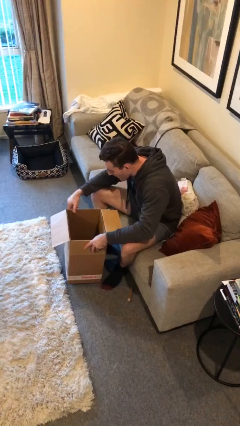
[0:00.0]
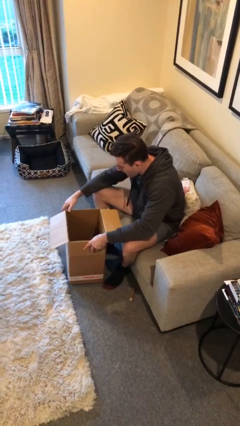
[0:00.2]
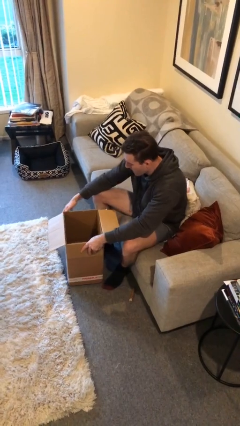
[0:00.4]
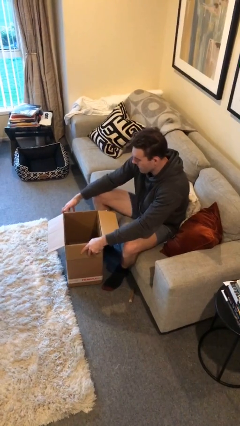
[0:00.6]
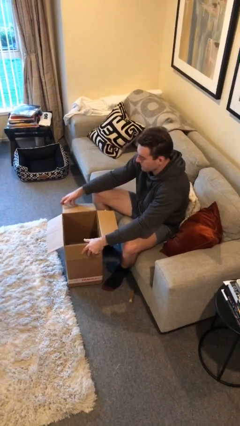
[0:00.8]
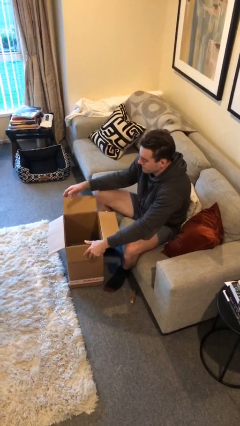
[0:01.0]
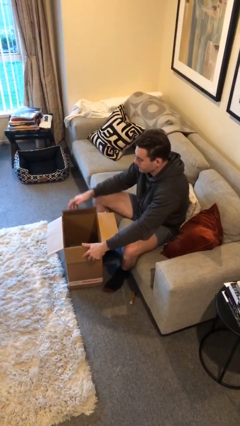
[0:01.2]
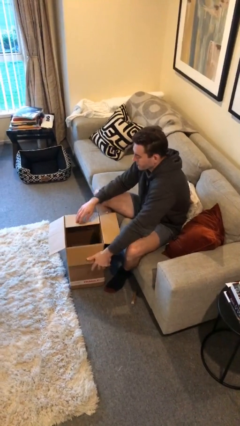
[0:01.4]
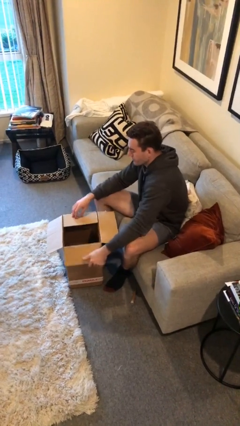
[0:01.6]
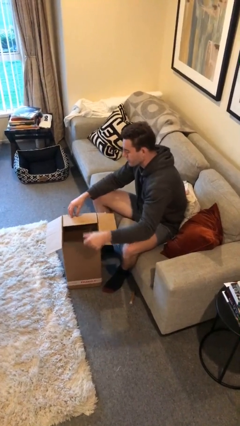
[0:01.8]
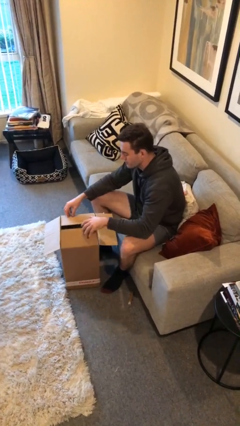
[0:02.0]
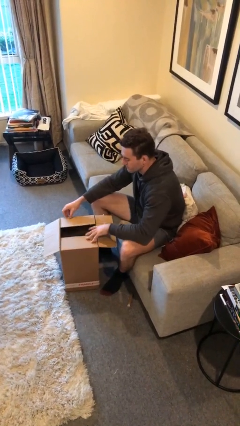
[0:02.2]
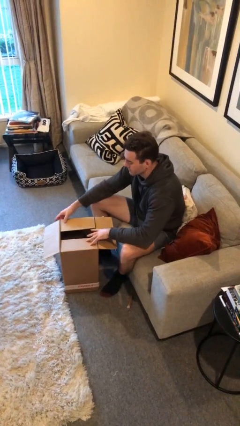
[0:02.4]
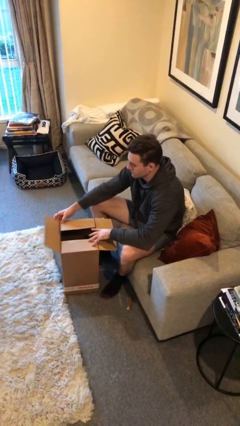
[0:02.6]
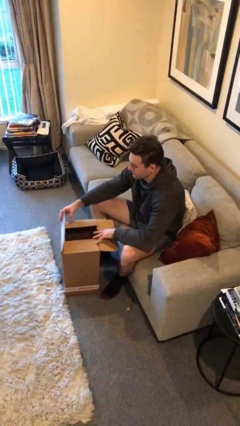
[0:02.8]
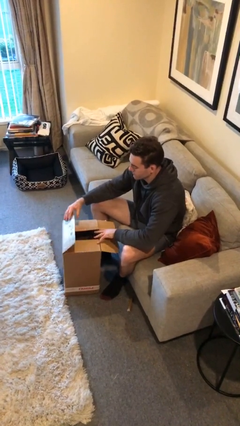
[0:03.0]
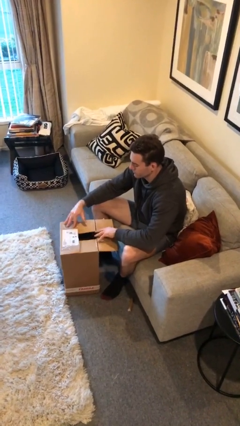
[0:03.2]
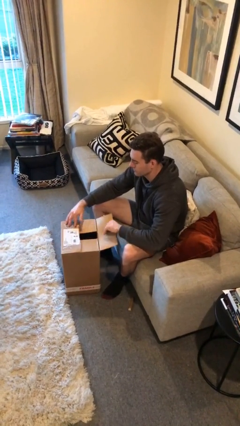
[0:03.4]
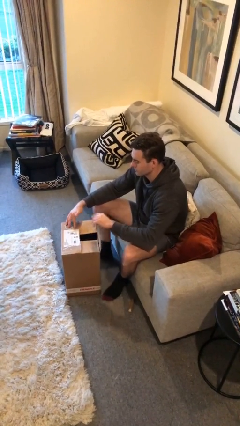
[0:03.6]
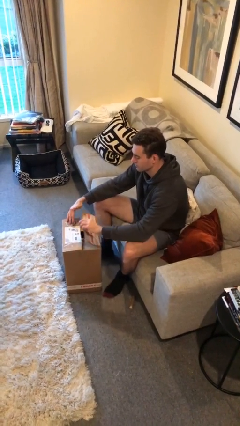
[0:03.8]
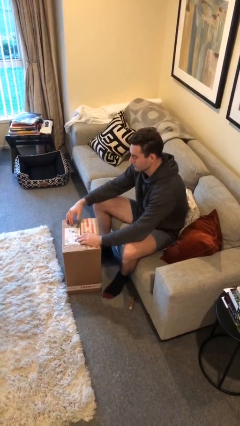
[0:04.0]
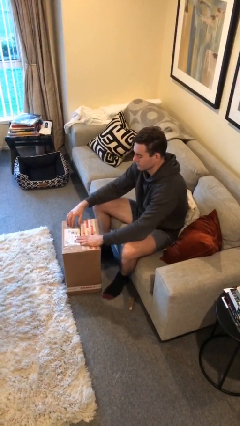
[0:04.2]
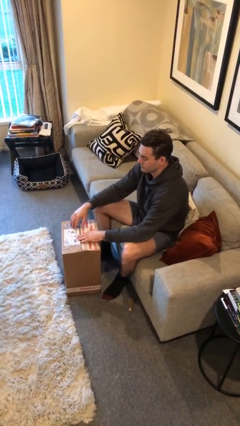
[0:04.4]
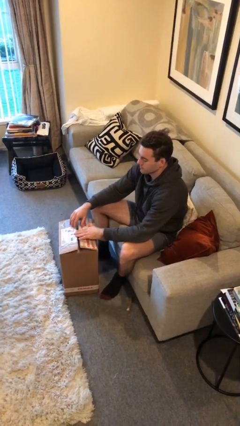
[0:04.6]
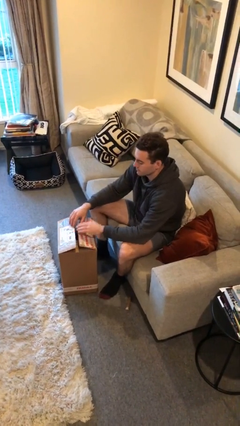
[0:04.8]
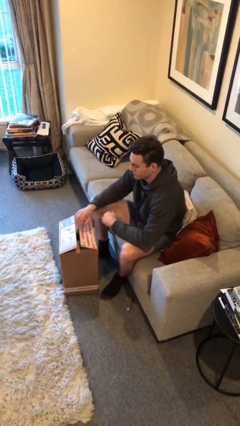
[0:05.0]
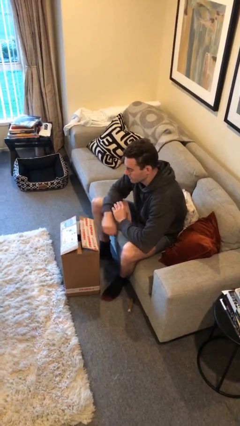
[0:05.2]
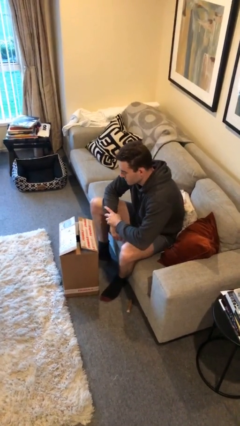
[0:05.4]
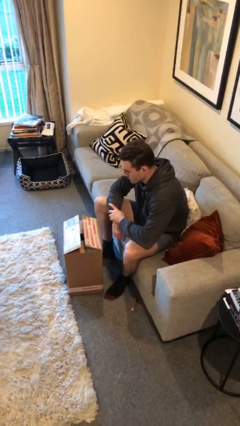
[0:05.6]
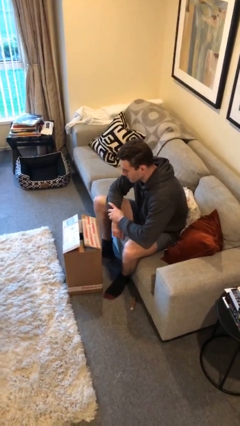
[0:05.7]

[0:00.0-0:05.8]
person closes box

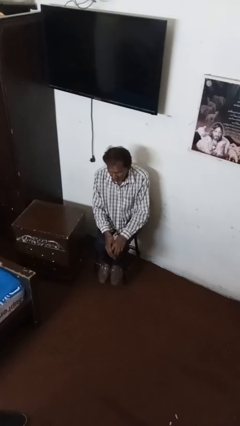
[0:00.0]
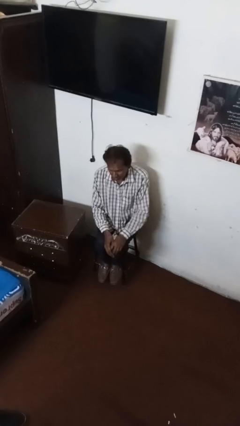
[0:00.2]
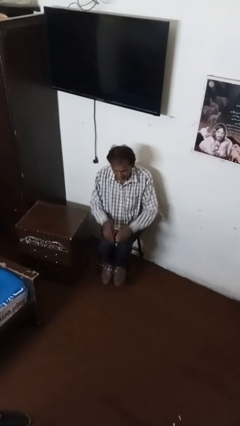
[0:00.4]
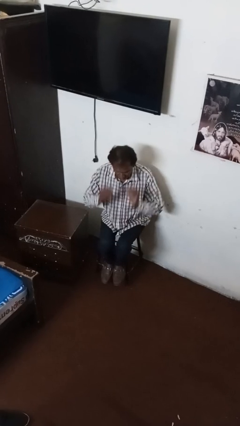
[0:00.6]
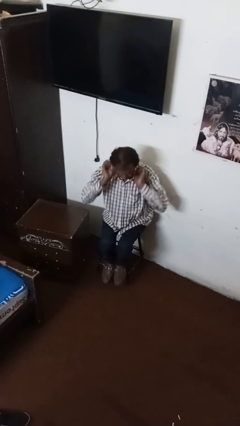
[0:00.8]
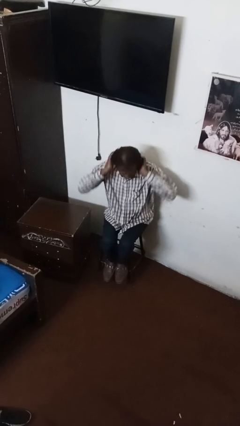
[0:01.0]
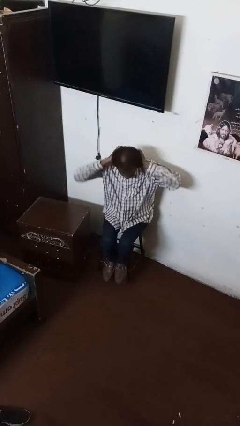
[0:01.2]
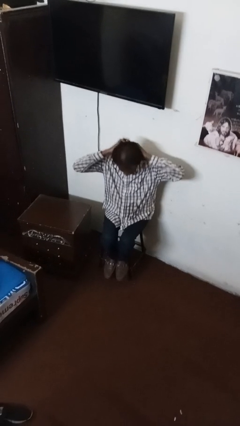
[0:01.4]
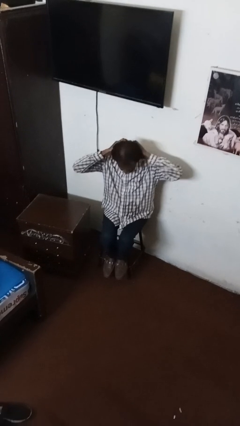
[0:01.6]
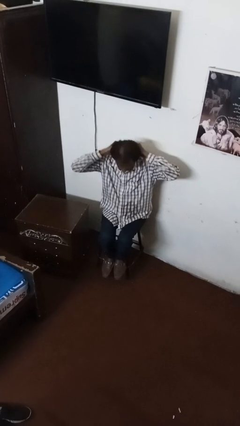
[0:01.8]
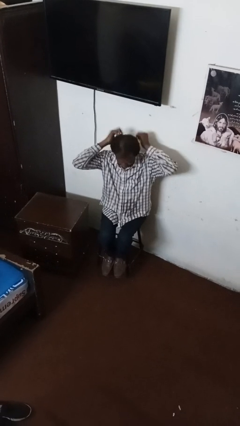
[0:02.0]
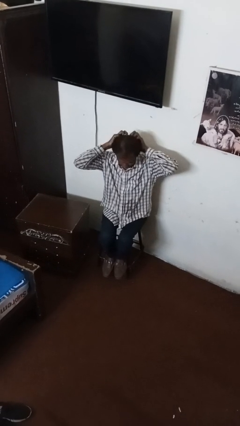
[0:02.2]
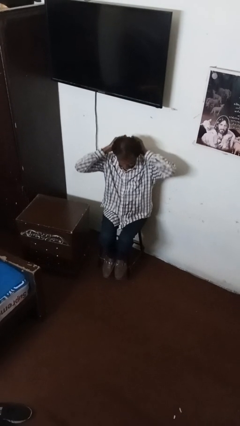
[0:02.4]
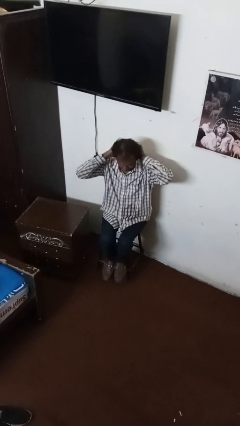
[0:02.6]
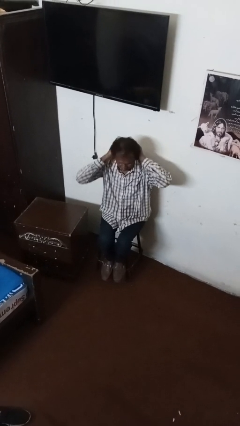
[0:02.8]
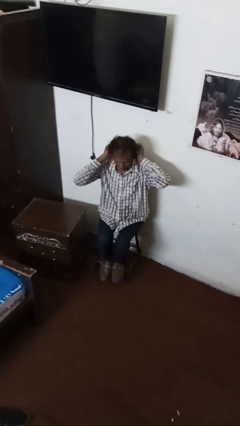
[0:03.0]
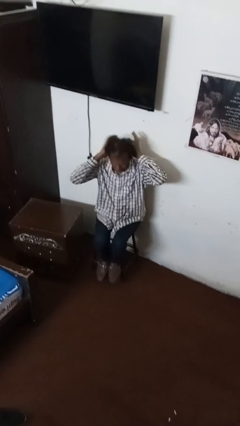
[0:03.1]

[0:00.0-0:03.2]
person strokes hair

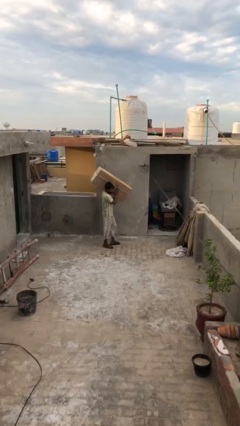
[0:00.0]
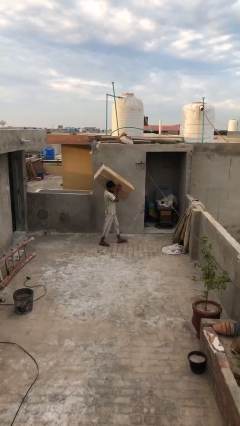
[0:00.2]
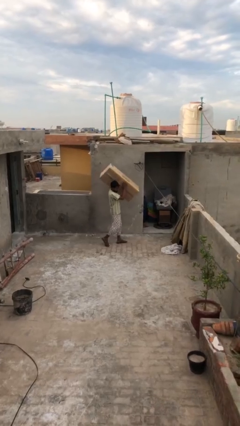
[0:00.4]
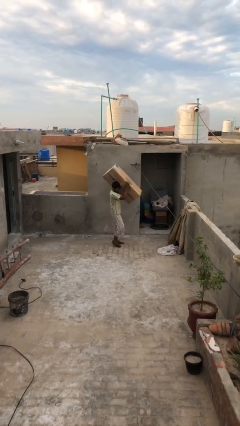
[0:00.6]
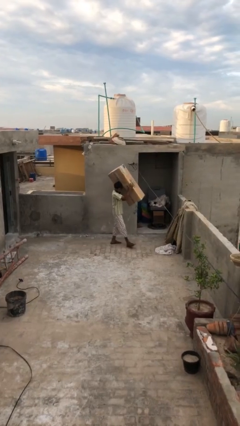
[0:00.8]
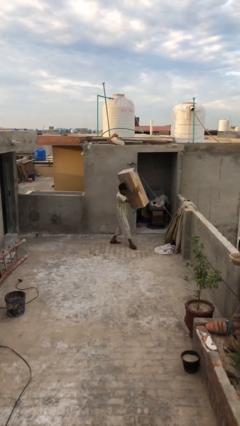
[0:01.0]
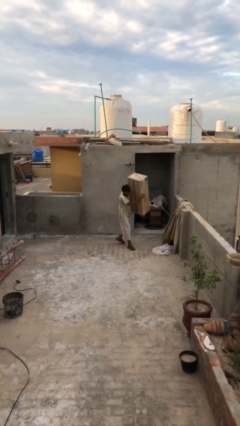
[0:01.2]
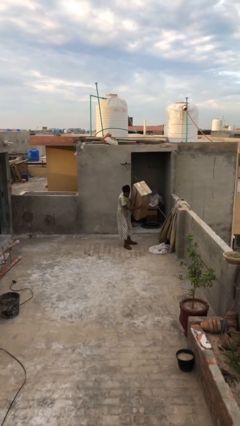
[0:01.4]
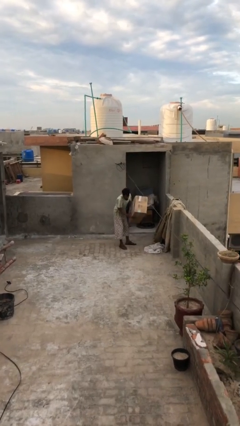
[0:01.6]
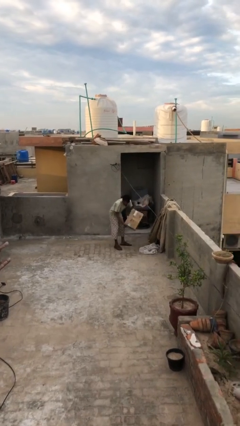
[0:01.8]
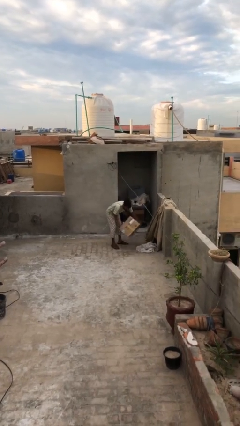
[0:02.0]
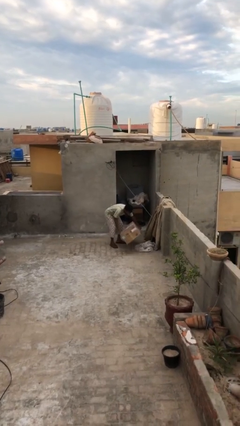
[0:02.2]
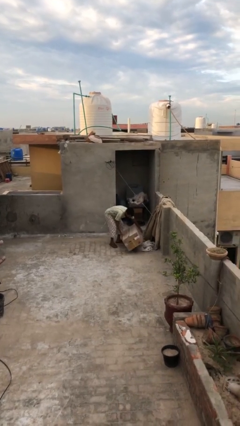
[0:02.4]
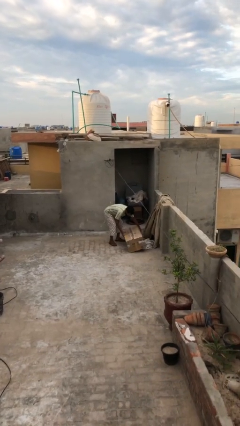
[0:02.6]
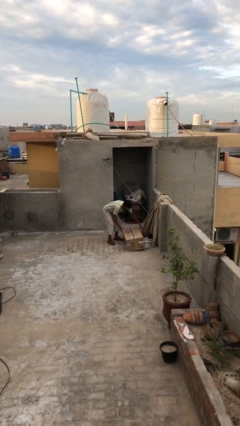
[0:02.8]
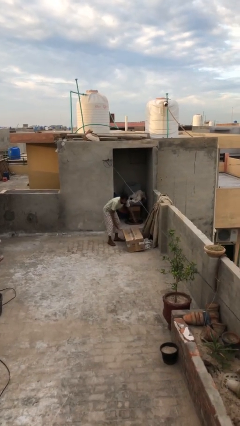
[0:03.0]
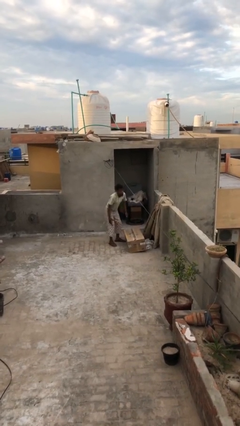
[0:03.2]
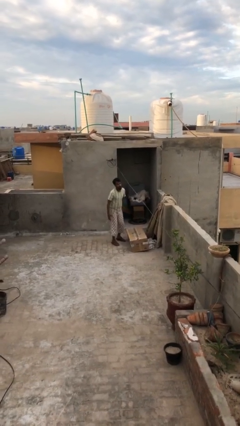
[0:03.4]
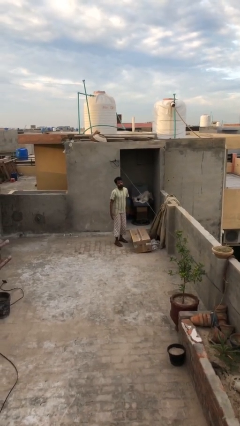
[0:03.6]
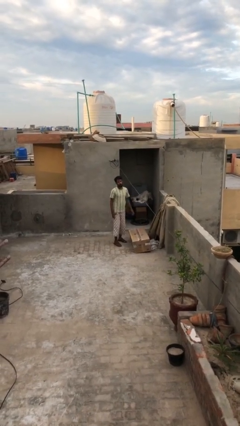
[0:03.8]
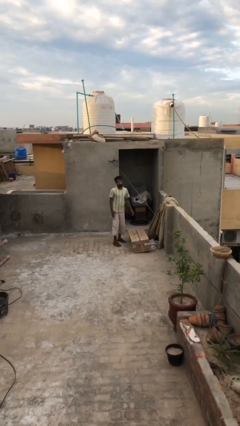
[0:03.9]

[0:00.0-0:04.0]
person puts down object on floor

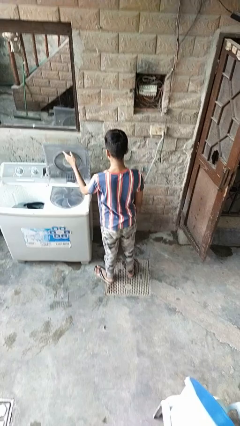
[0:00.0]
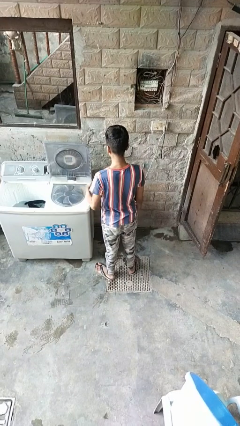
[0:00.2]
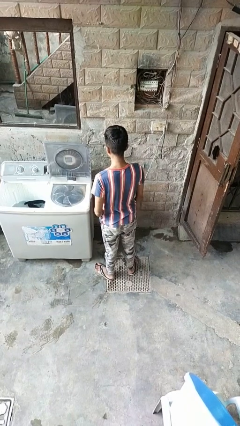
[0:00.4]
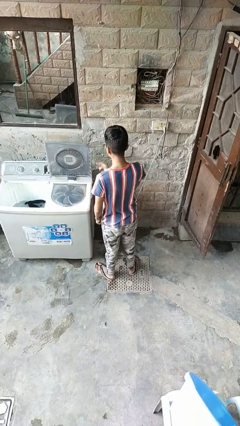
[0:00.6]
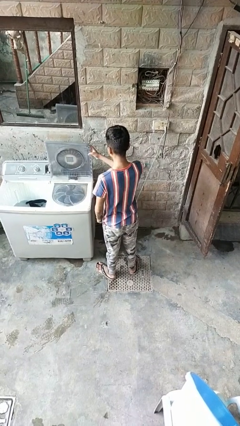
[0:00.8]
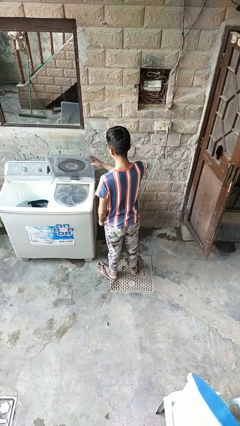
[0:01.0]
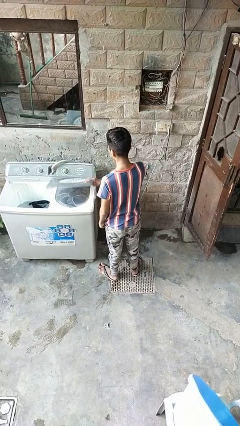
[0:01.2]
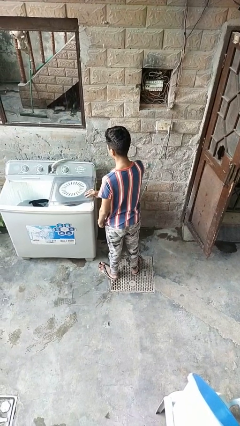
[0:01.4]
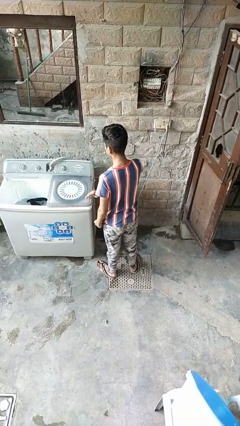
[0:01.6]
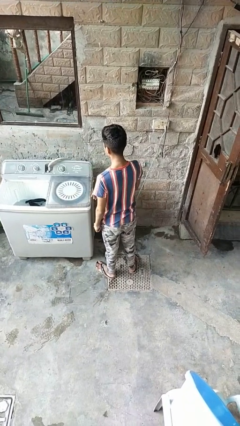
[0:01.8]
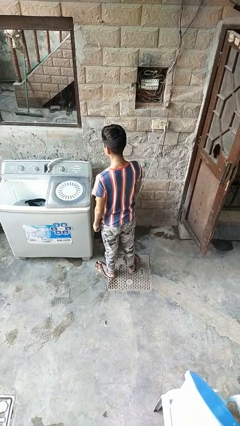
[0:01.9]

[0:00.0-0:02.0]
person turns off faucet

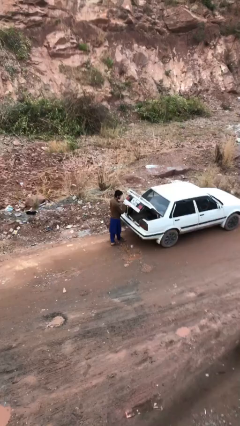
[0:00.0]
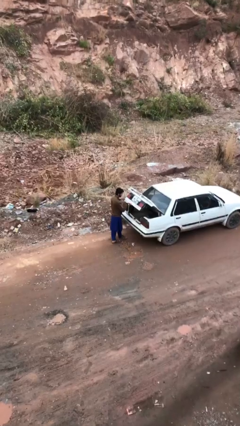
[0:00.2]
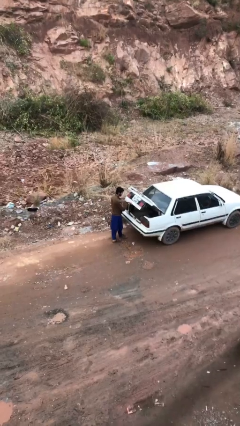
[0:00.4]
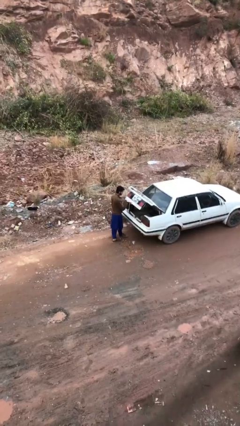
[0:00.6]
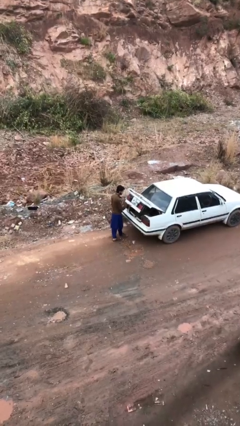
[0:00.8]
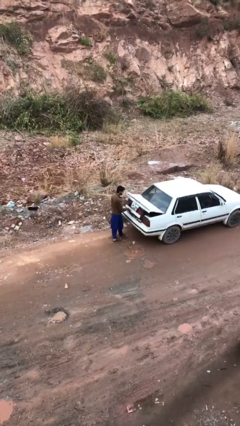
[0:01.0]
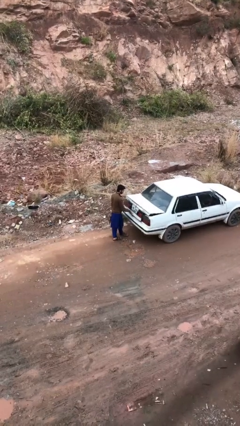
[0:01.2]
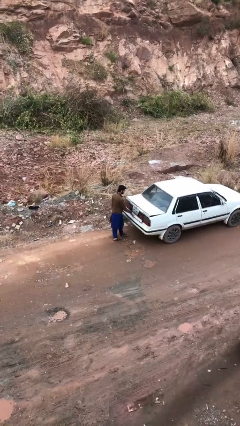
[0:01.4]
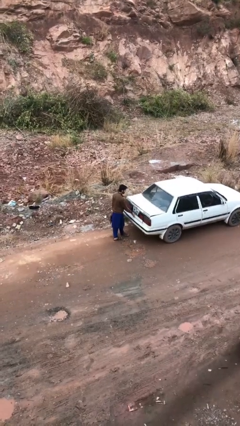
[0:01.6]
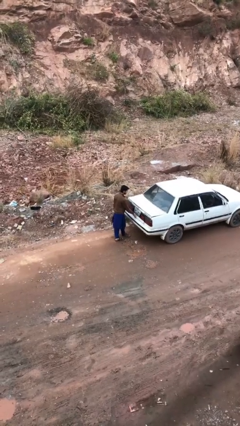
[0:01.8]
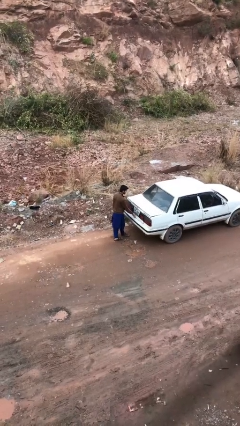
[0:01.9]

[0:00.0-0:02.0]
person closes car trunk

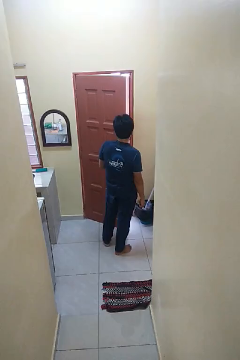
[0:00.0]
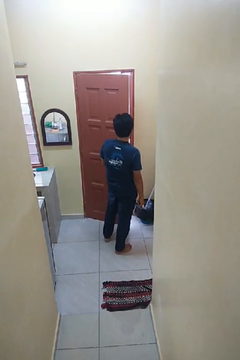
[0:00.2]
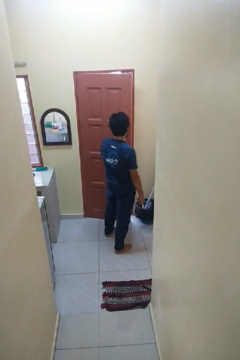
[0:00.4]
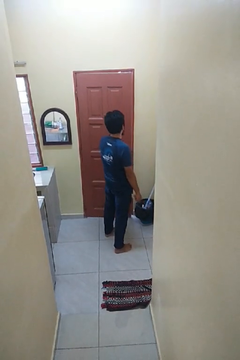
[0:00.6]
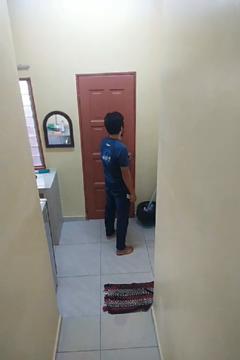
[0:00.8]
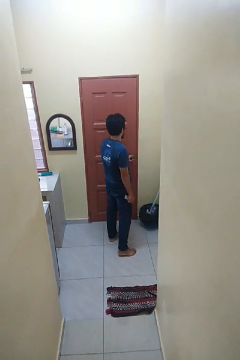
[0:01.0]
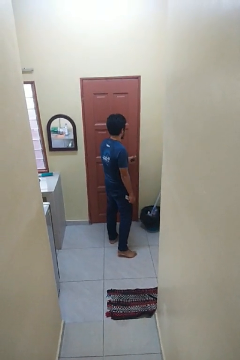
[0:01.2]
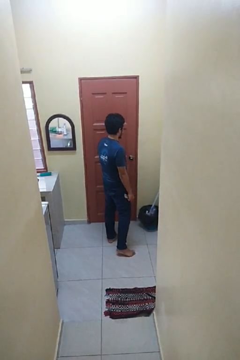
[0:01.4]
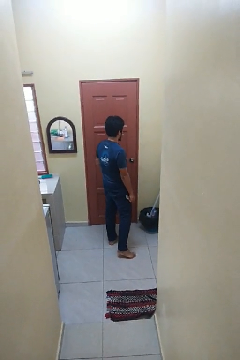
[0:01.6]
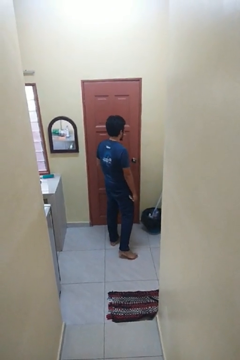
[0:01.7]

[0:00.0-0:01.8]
person closes facility door
